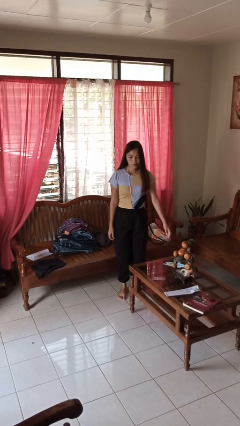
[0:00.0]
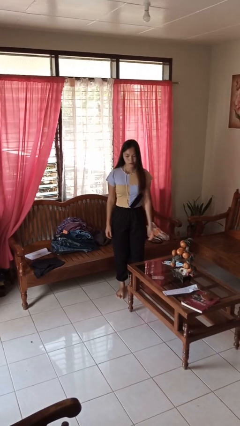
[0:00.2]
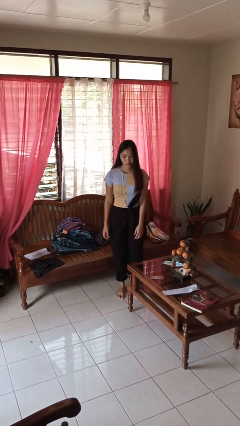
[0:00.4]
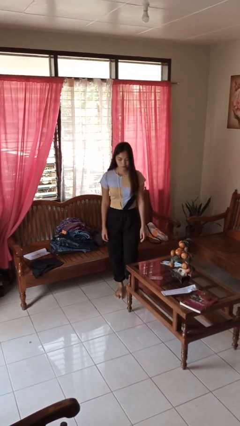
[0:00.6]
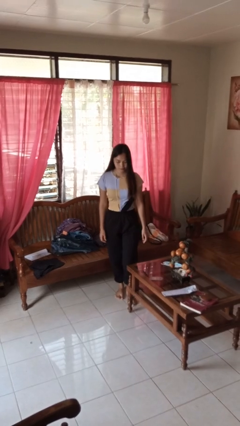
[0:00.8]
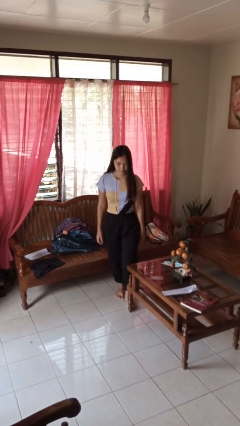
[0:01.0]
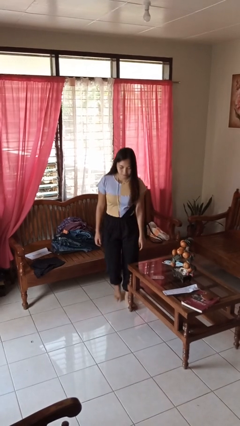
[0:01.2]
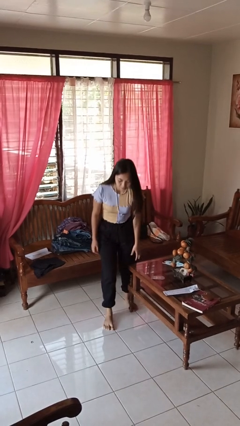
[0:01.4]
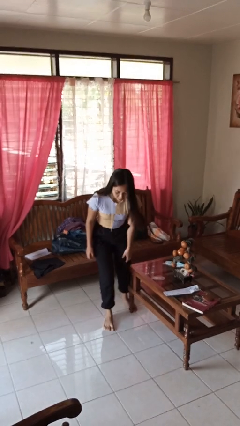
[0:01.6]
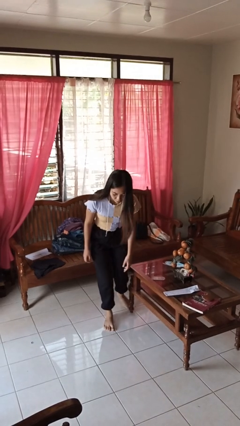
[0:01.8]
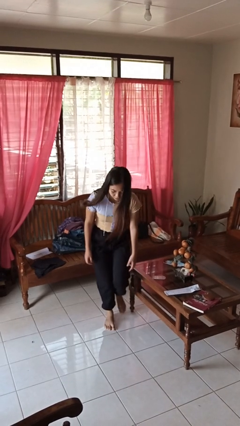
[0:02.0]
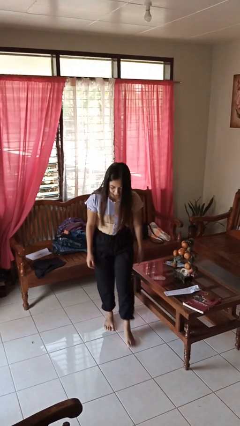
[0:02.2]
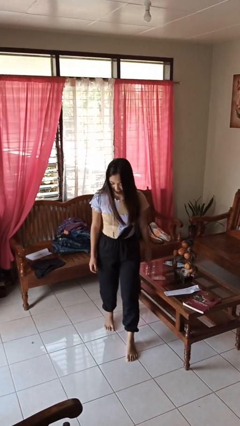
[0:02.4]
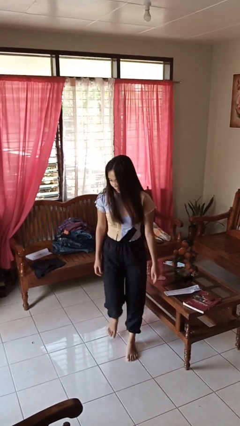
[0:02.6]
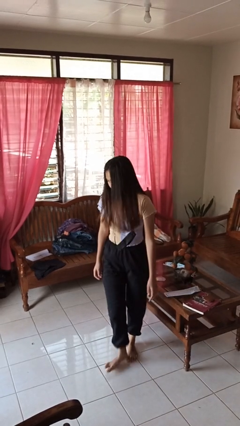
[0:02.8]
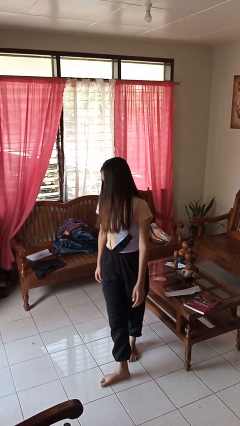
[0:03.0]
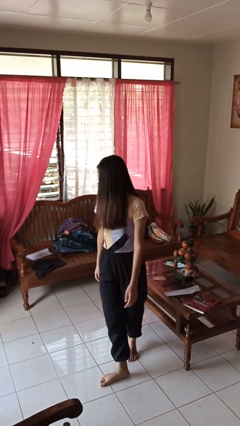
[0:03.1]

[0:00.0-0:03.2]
person bumps into table

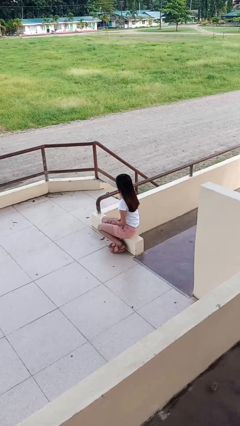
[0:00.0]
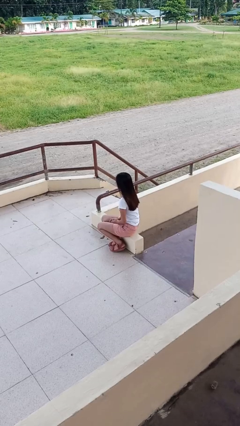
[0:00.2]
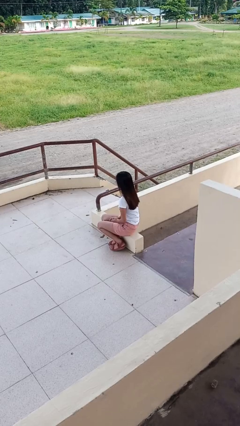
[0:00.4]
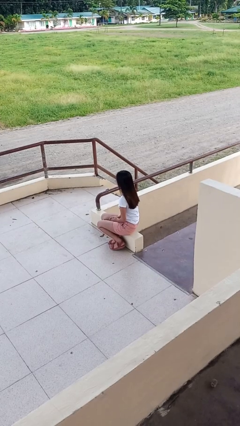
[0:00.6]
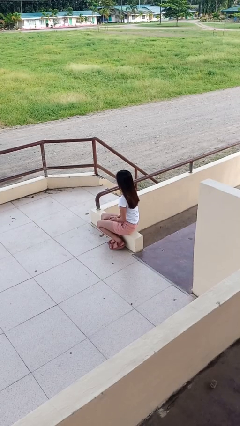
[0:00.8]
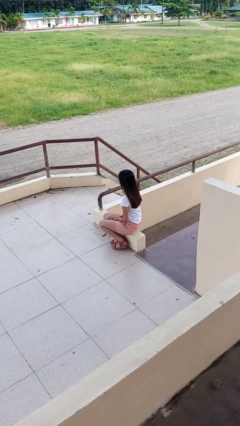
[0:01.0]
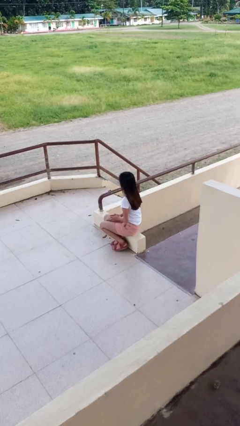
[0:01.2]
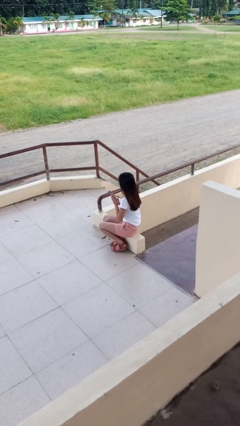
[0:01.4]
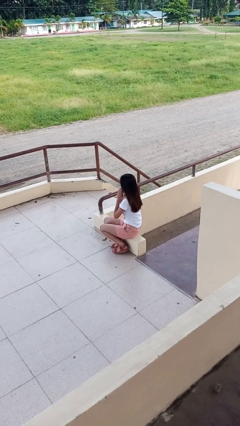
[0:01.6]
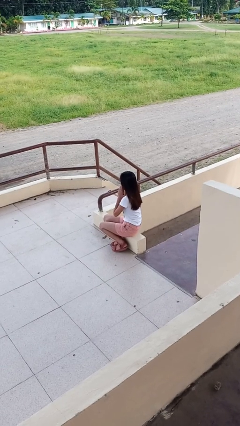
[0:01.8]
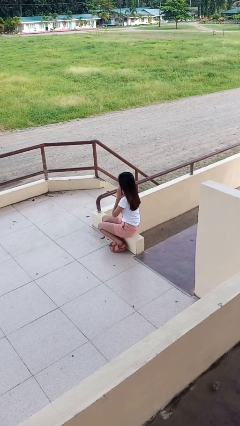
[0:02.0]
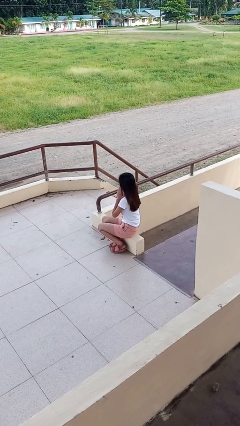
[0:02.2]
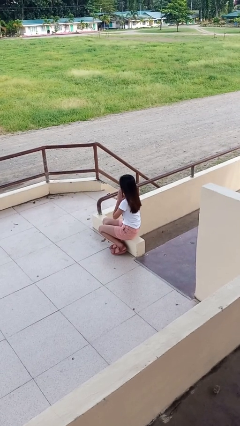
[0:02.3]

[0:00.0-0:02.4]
person prays

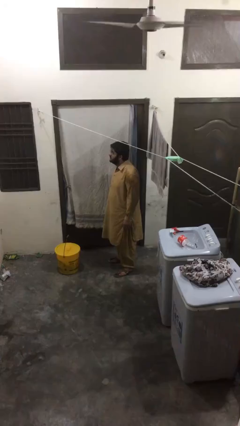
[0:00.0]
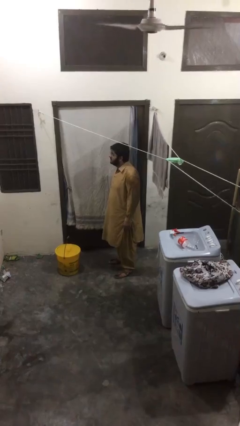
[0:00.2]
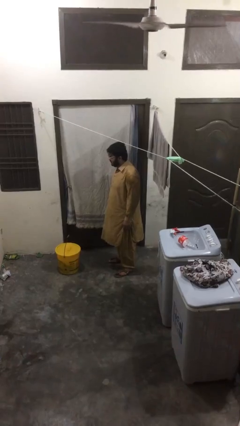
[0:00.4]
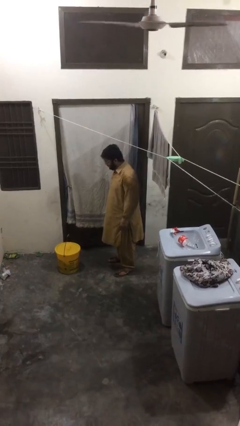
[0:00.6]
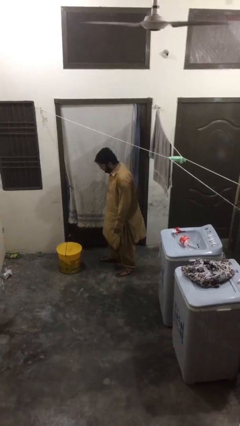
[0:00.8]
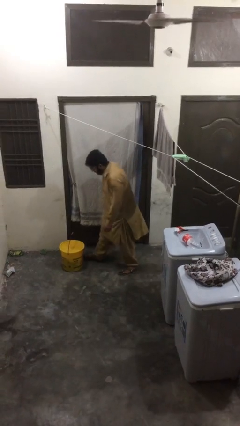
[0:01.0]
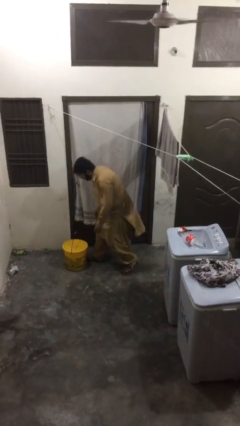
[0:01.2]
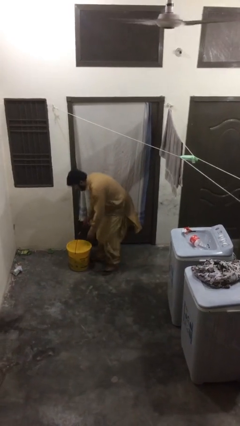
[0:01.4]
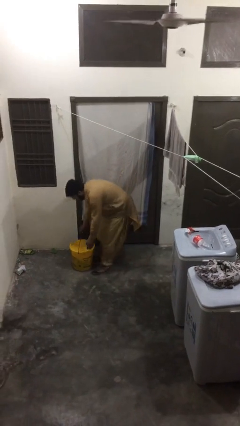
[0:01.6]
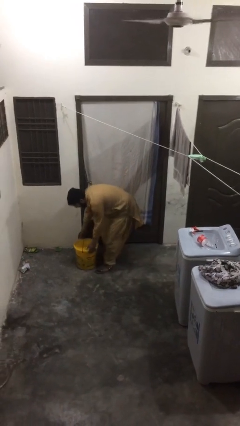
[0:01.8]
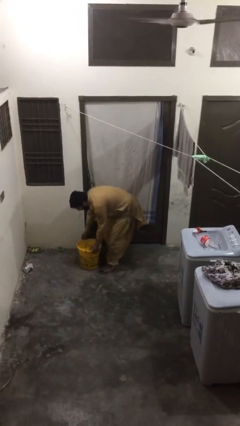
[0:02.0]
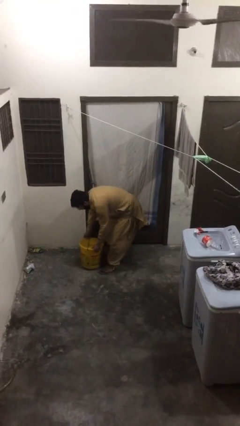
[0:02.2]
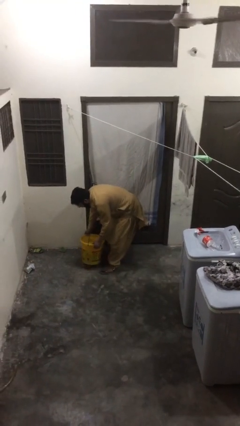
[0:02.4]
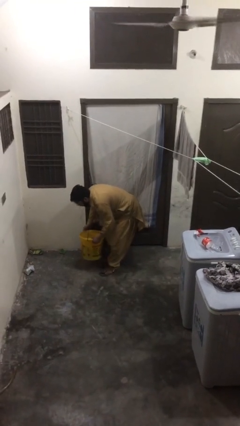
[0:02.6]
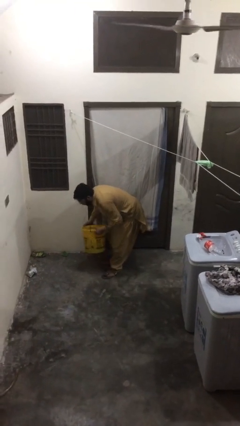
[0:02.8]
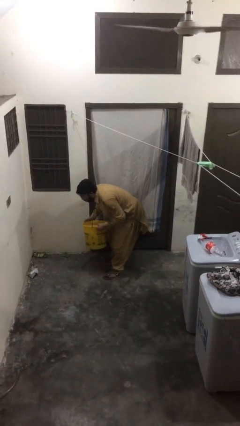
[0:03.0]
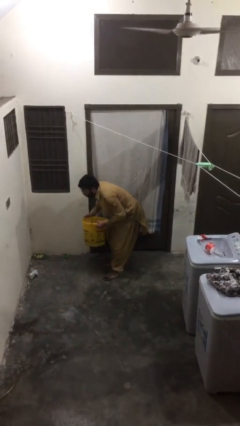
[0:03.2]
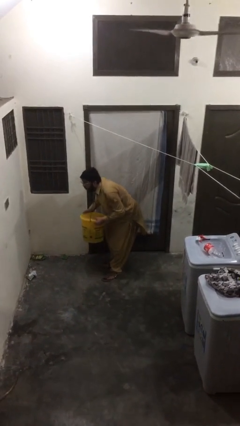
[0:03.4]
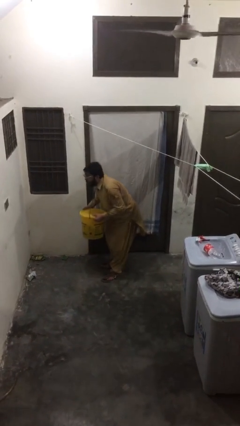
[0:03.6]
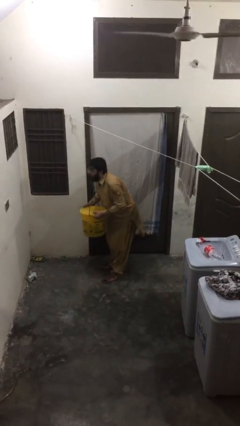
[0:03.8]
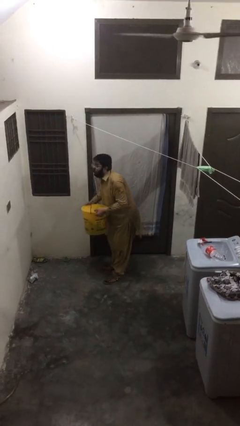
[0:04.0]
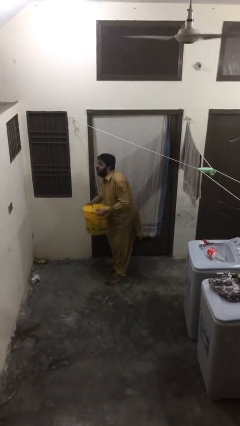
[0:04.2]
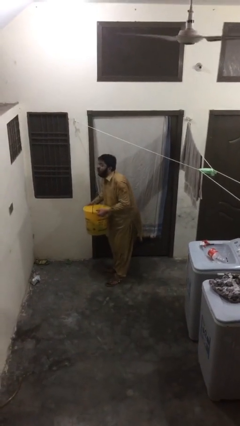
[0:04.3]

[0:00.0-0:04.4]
person picks up object from floor

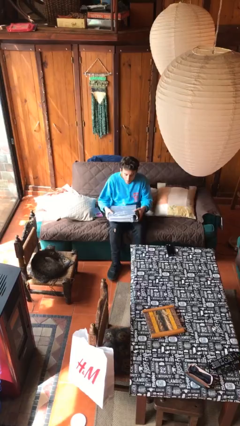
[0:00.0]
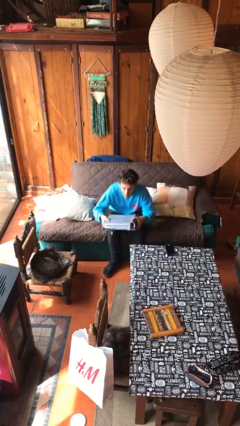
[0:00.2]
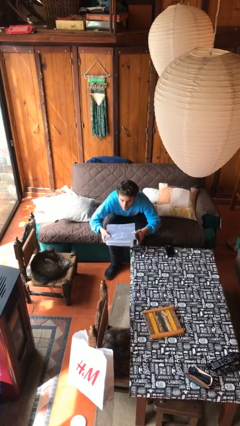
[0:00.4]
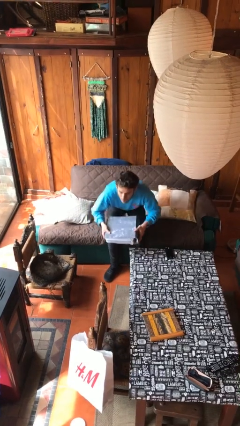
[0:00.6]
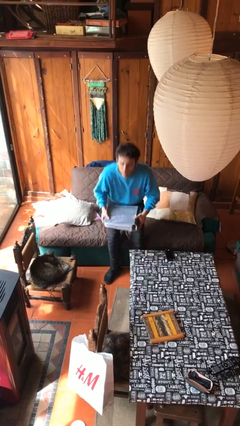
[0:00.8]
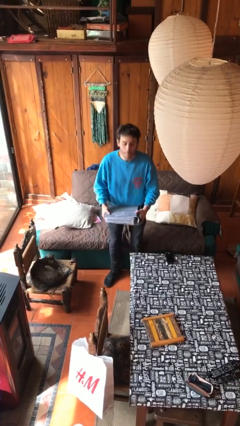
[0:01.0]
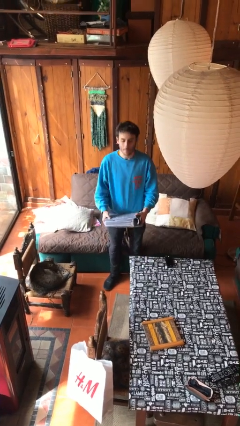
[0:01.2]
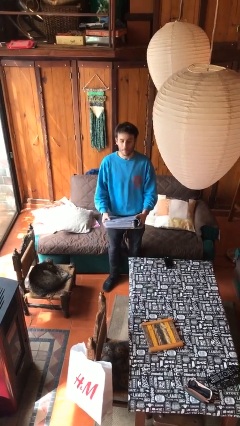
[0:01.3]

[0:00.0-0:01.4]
person stands up

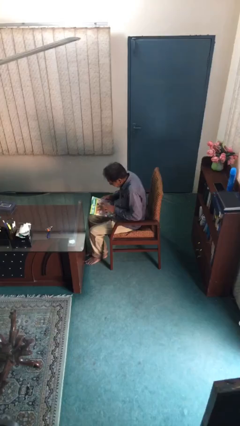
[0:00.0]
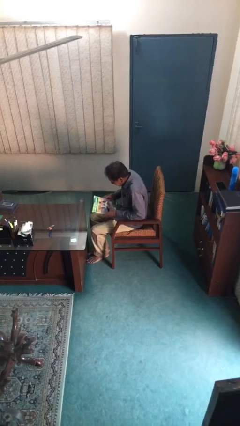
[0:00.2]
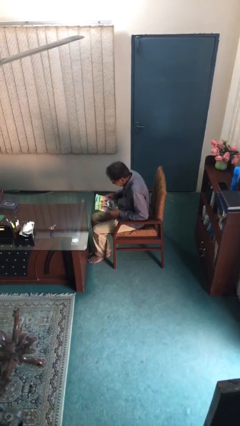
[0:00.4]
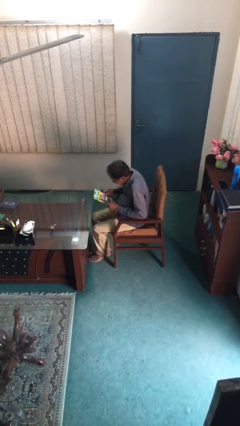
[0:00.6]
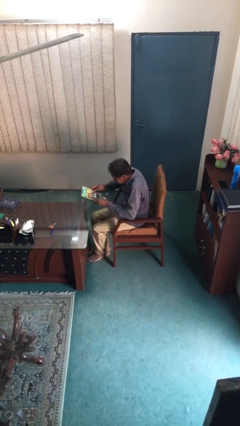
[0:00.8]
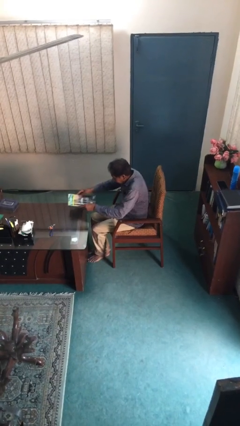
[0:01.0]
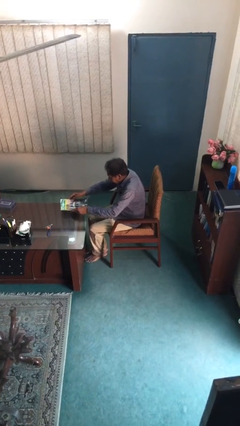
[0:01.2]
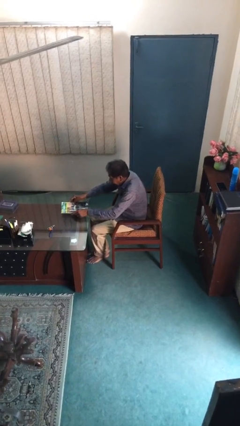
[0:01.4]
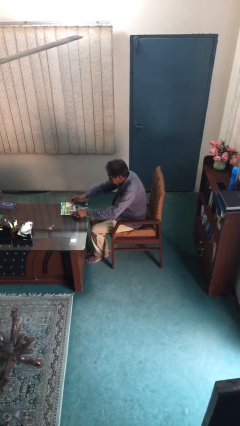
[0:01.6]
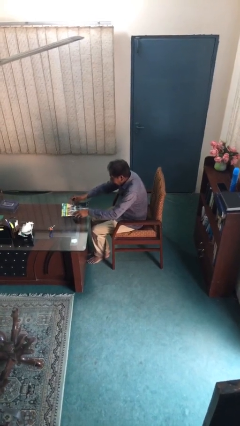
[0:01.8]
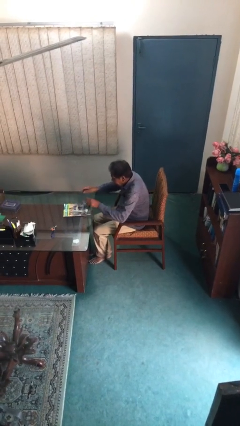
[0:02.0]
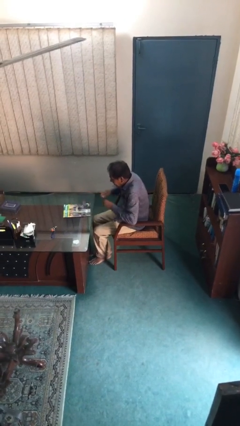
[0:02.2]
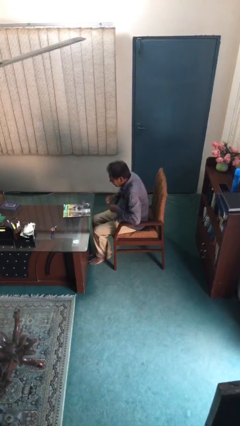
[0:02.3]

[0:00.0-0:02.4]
person puts down object on table

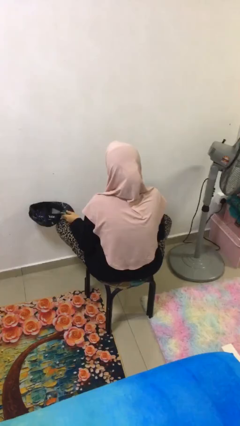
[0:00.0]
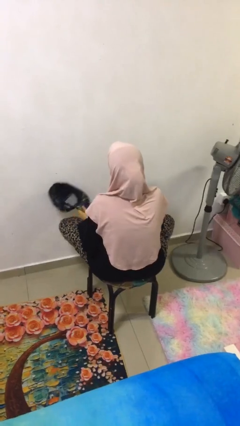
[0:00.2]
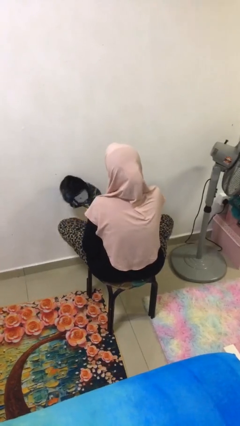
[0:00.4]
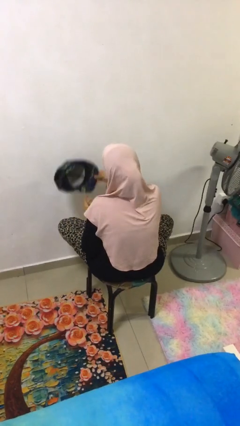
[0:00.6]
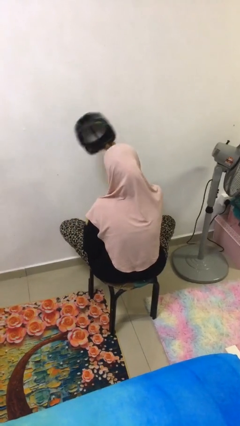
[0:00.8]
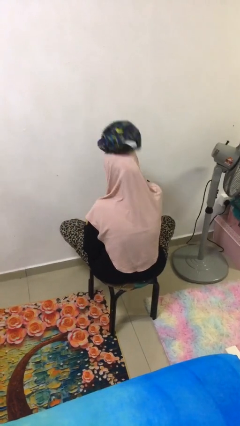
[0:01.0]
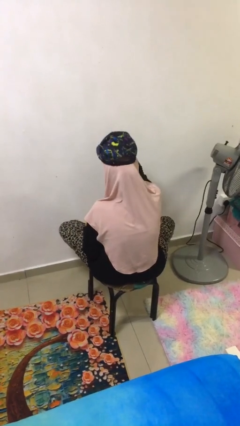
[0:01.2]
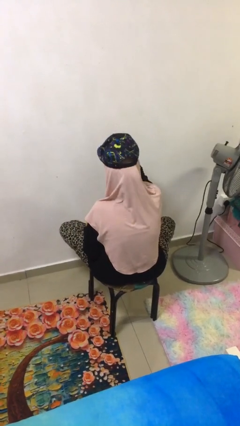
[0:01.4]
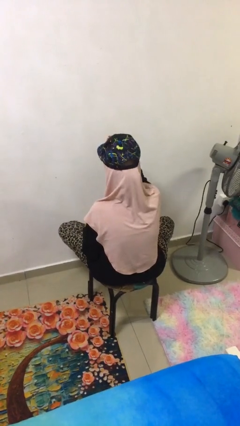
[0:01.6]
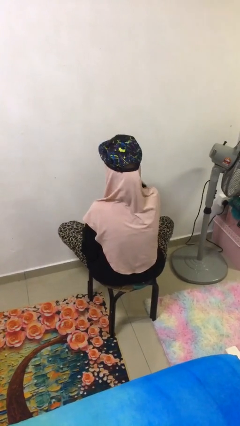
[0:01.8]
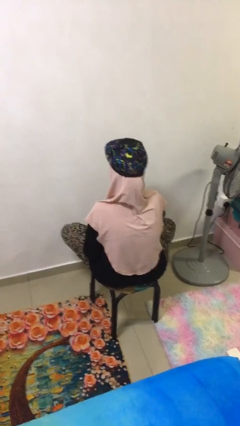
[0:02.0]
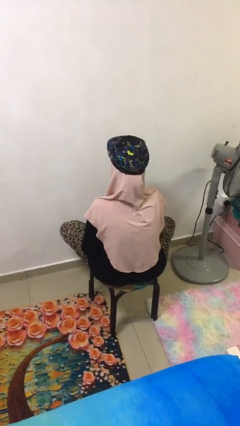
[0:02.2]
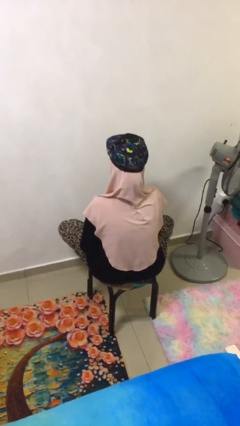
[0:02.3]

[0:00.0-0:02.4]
person puts on hat

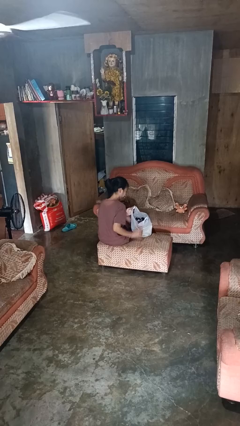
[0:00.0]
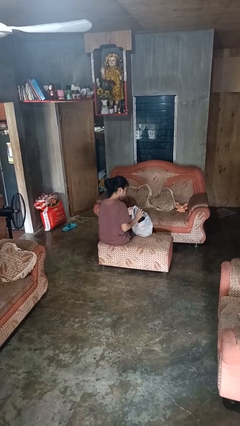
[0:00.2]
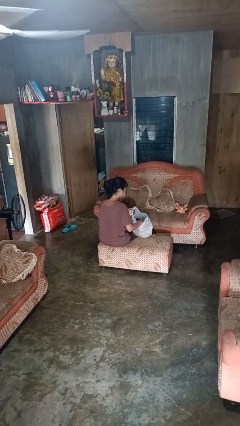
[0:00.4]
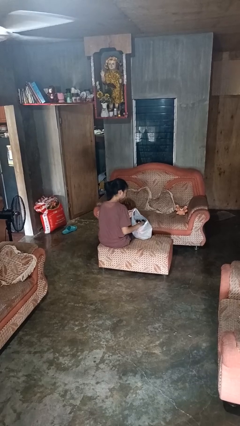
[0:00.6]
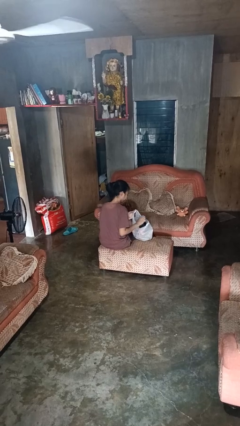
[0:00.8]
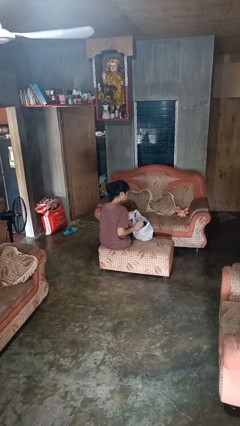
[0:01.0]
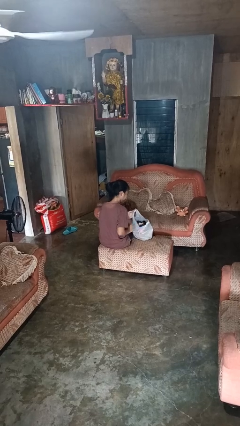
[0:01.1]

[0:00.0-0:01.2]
person puts object into bag
